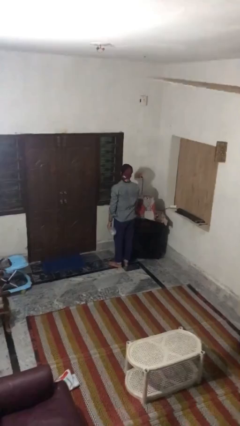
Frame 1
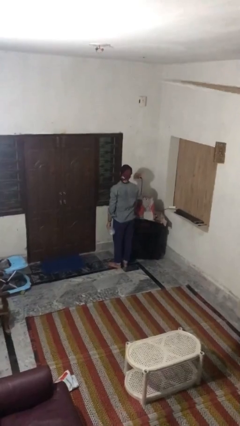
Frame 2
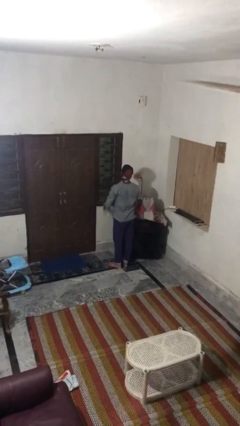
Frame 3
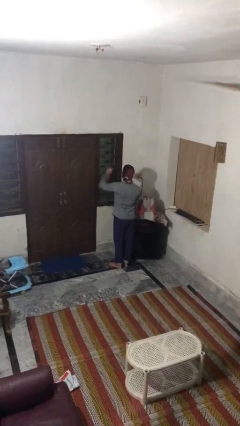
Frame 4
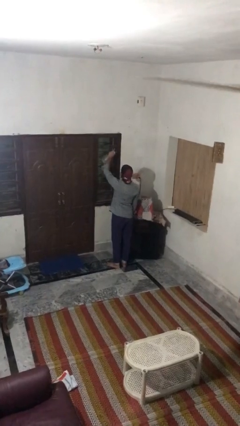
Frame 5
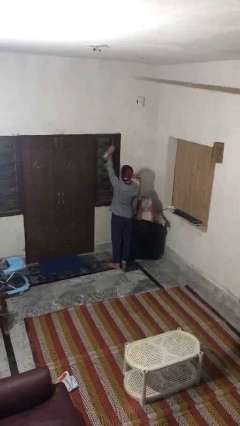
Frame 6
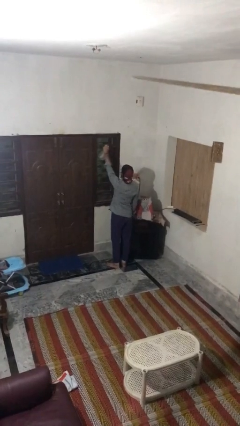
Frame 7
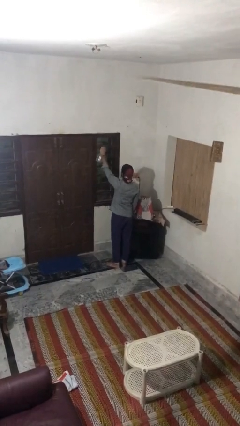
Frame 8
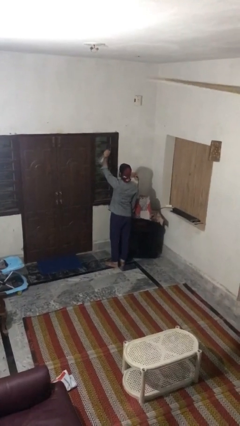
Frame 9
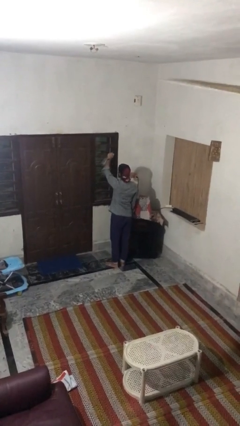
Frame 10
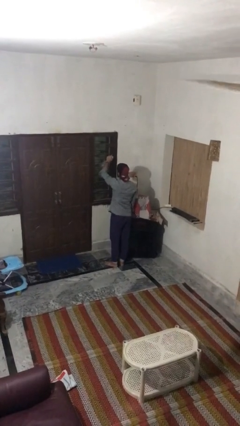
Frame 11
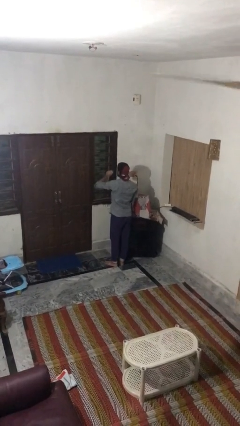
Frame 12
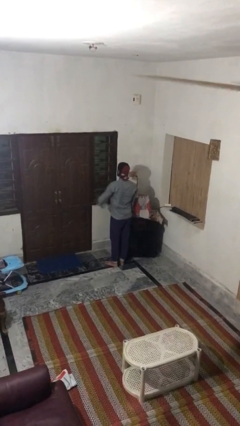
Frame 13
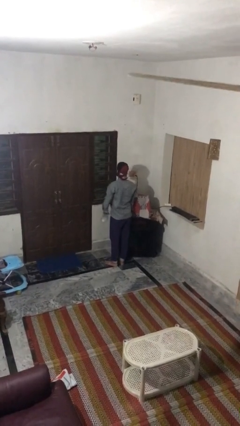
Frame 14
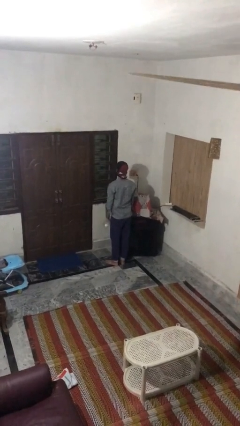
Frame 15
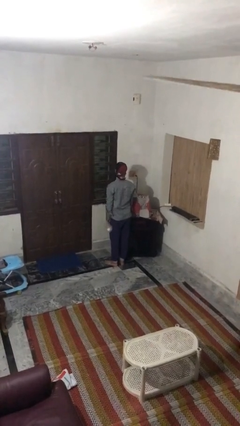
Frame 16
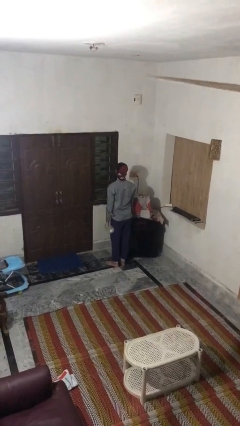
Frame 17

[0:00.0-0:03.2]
person sprays from bottle

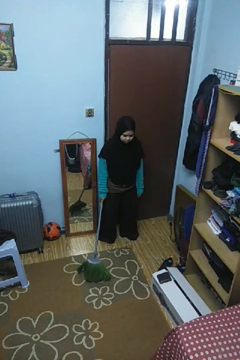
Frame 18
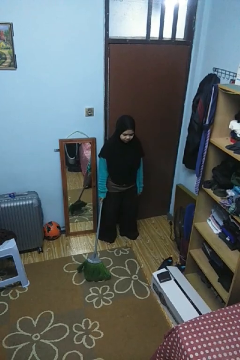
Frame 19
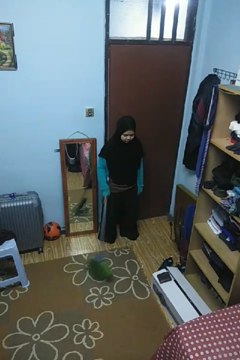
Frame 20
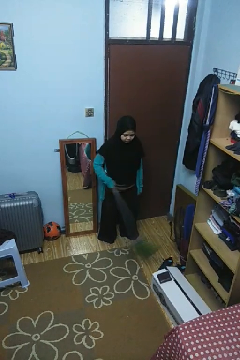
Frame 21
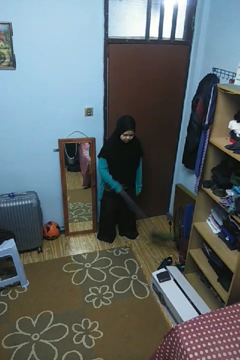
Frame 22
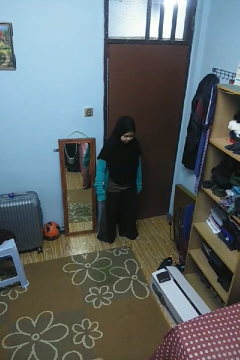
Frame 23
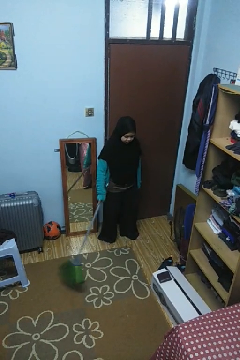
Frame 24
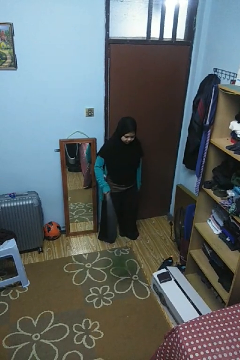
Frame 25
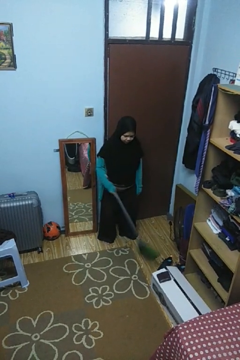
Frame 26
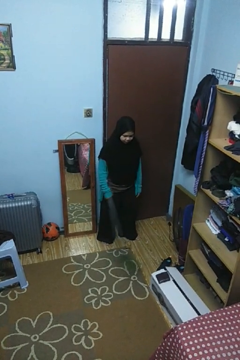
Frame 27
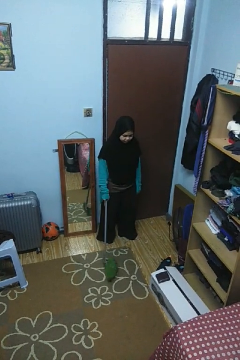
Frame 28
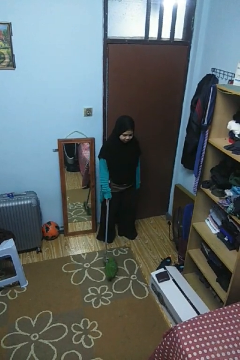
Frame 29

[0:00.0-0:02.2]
person sweeps floor

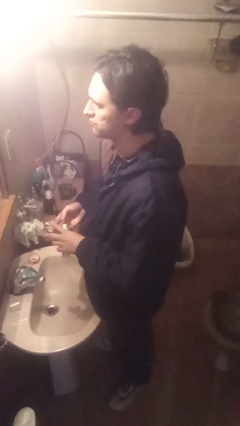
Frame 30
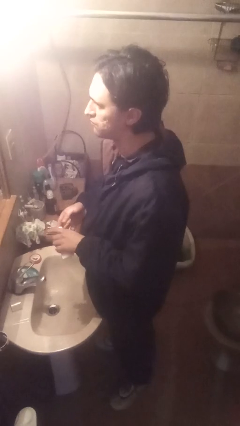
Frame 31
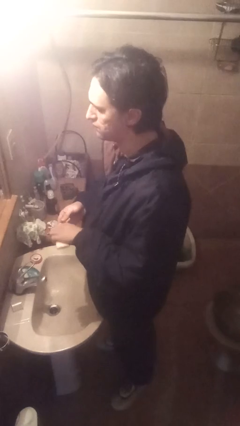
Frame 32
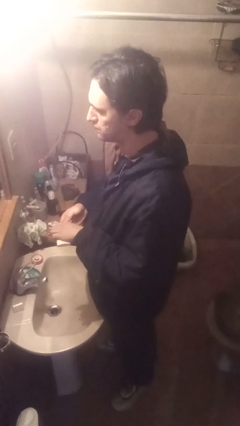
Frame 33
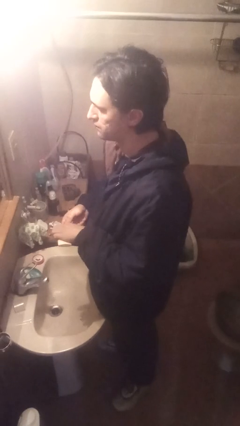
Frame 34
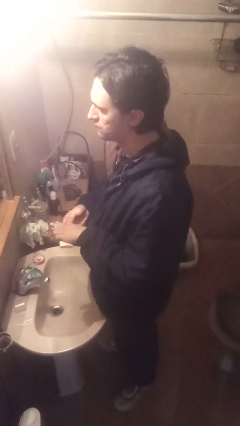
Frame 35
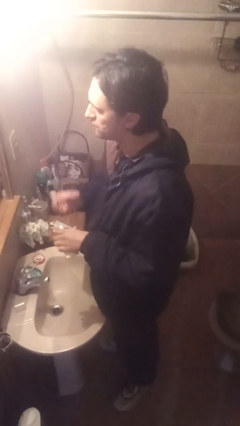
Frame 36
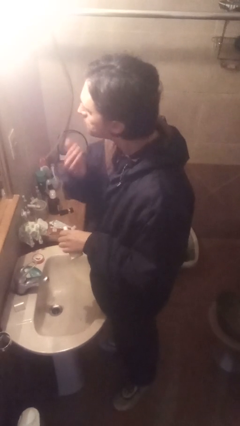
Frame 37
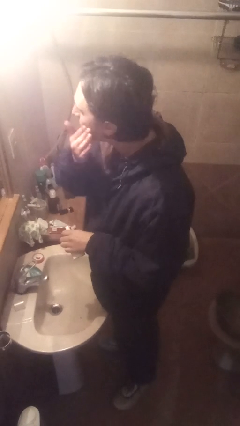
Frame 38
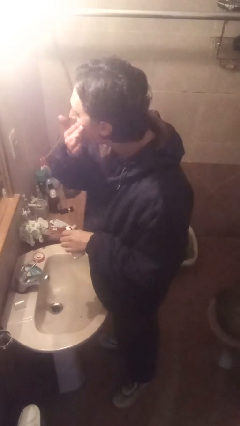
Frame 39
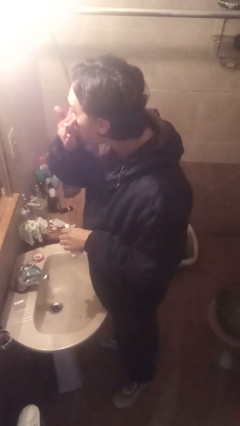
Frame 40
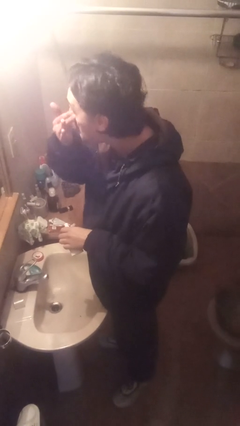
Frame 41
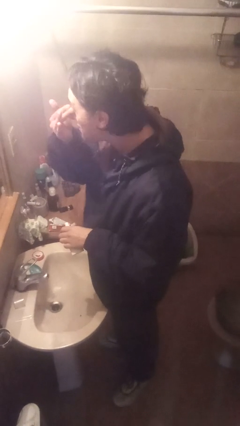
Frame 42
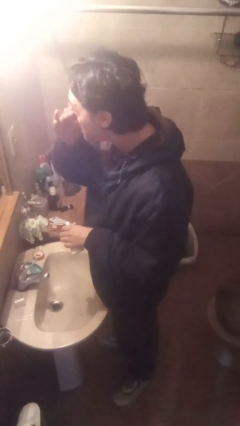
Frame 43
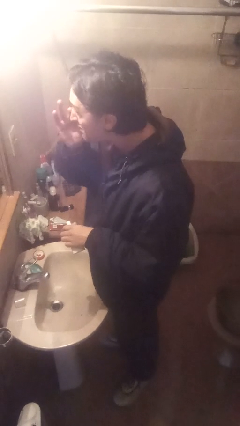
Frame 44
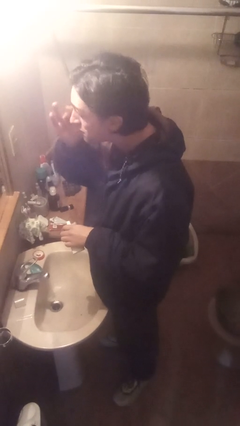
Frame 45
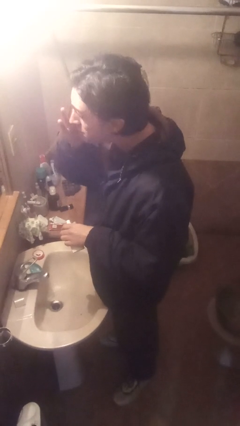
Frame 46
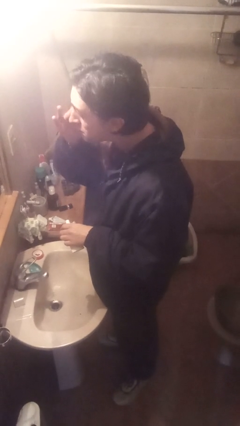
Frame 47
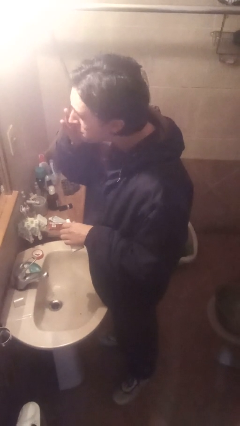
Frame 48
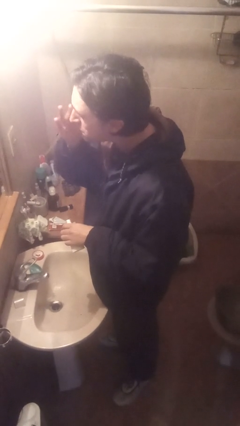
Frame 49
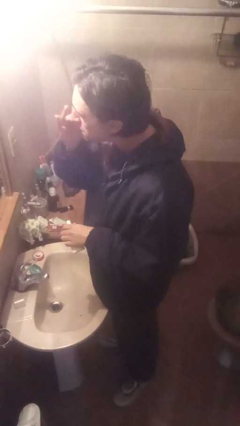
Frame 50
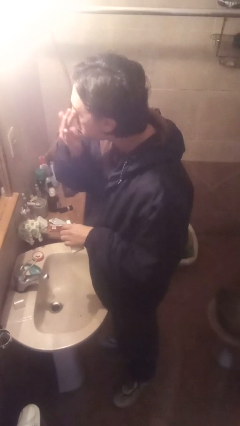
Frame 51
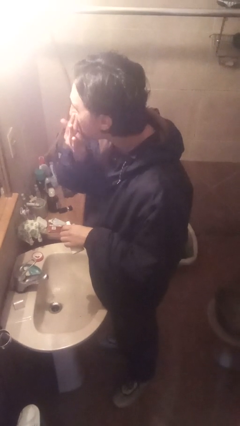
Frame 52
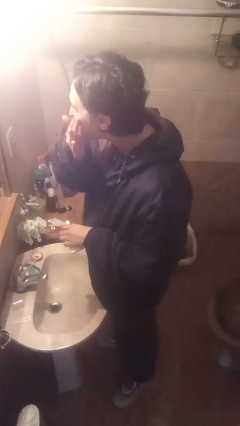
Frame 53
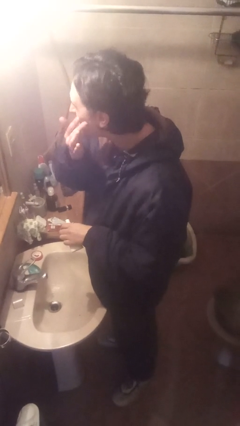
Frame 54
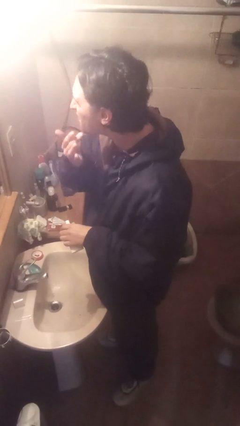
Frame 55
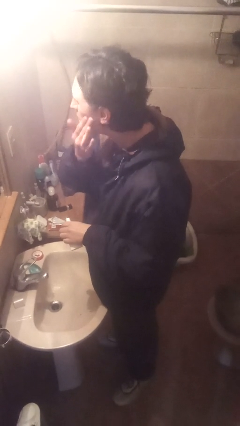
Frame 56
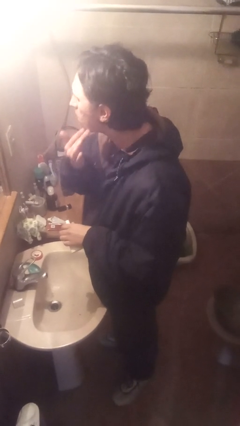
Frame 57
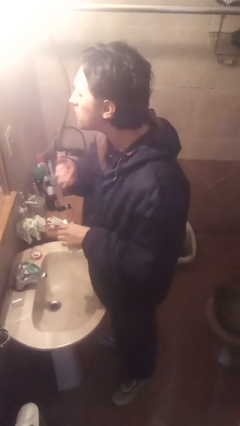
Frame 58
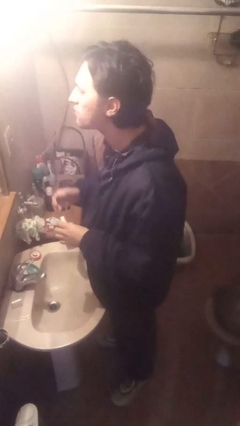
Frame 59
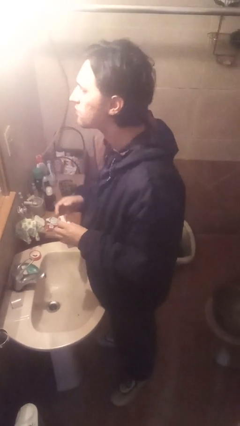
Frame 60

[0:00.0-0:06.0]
person applies foundation makeup

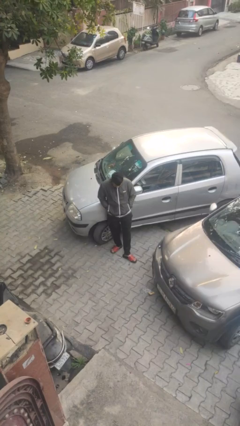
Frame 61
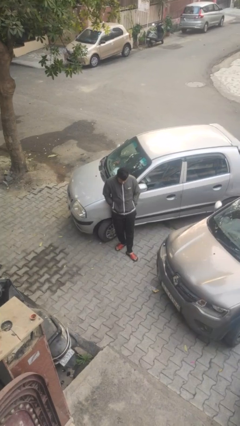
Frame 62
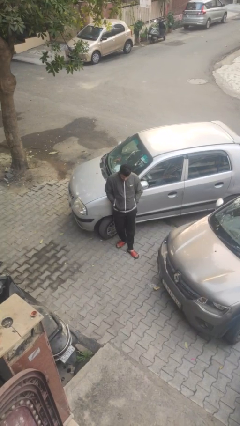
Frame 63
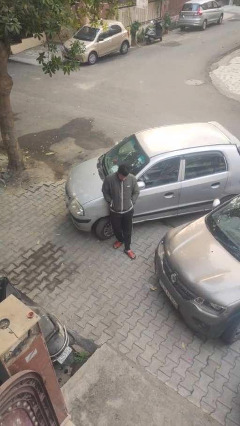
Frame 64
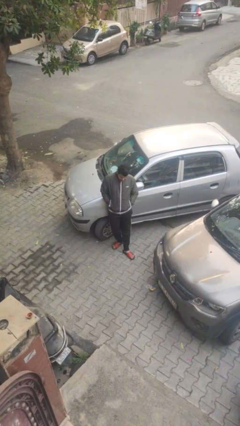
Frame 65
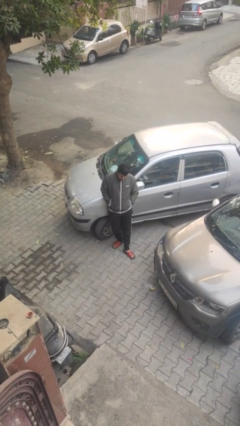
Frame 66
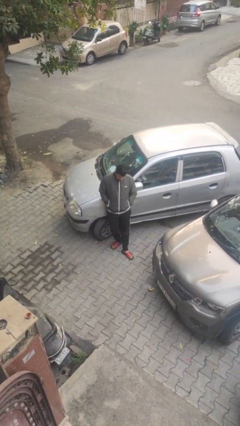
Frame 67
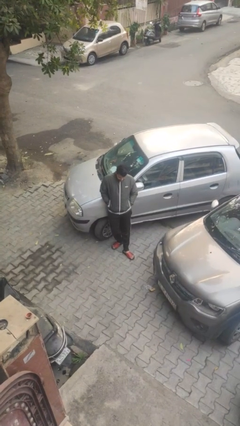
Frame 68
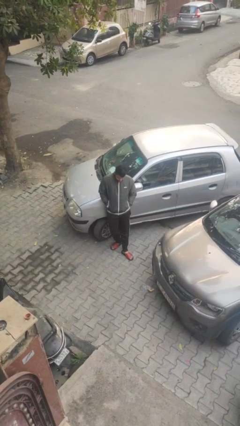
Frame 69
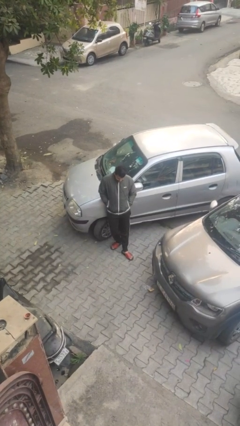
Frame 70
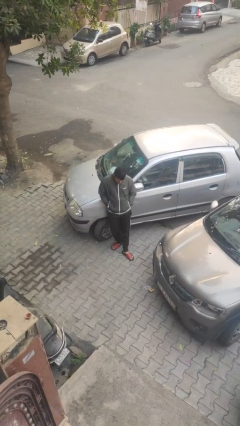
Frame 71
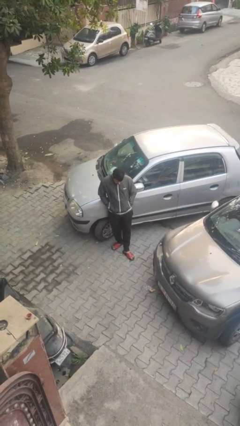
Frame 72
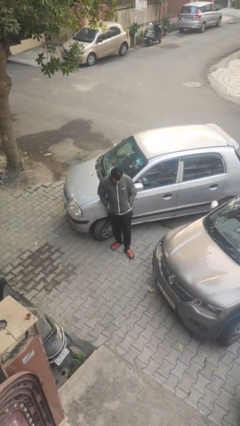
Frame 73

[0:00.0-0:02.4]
person leans against car

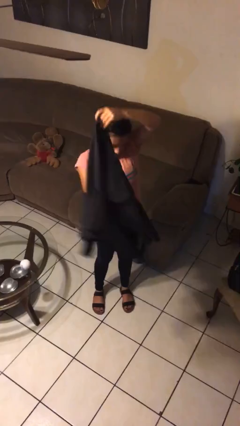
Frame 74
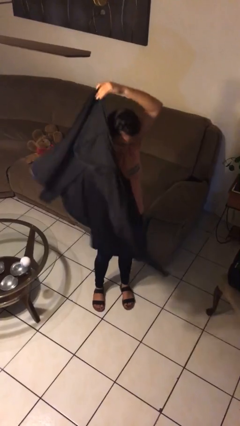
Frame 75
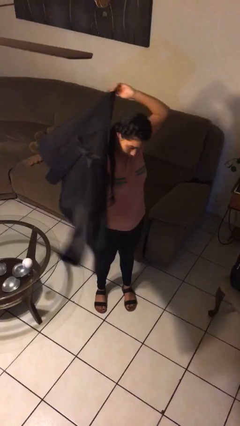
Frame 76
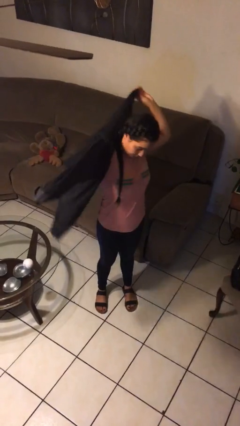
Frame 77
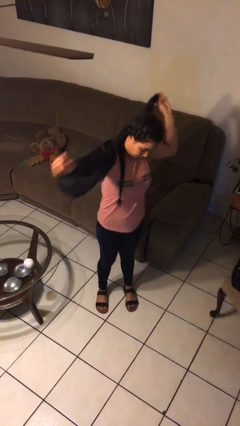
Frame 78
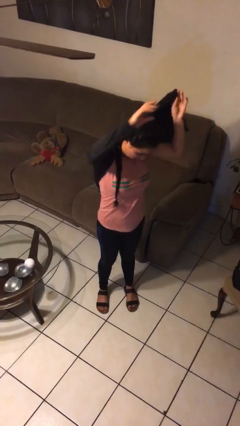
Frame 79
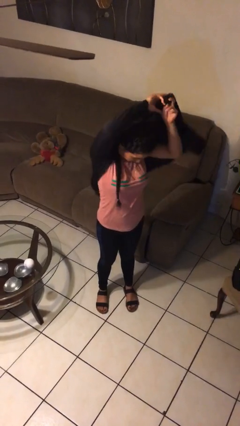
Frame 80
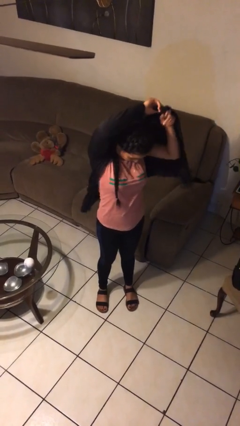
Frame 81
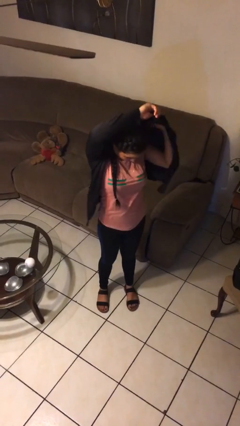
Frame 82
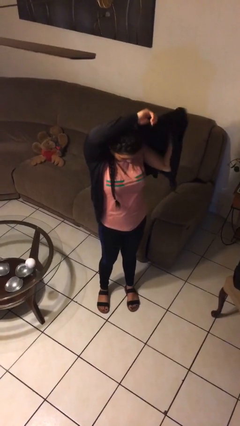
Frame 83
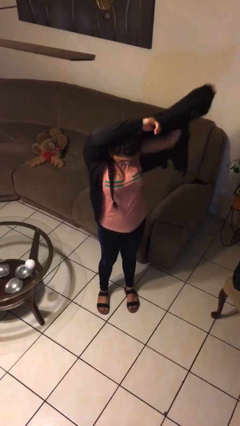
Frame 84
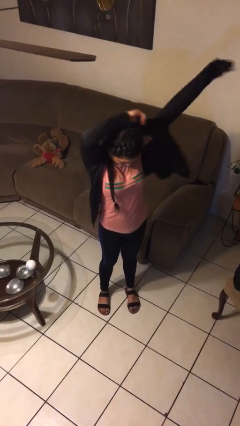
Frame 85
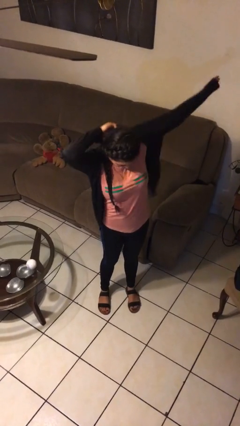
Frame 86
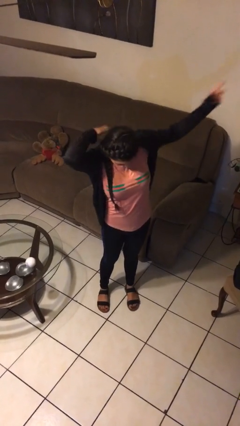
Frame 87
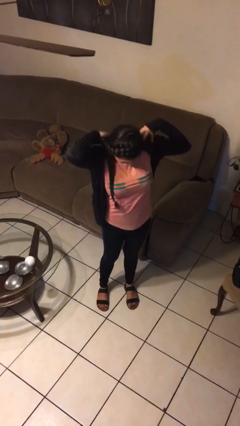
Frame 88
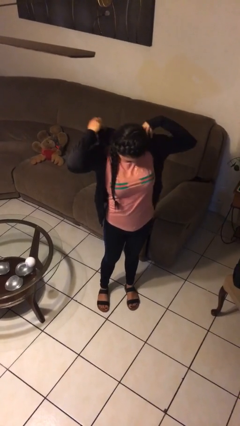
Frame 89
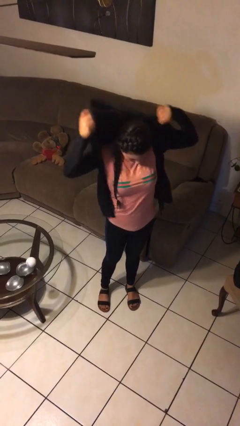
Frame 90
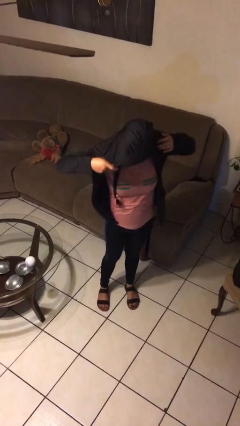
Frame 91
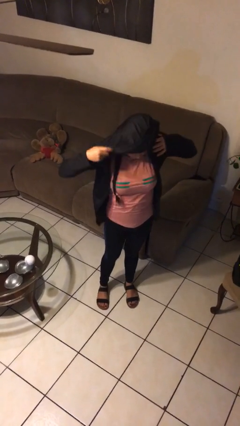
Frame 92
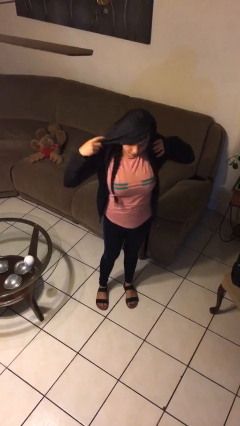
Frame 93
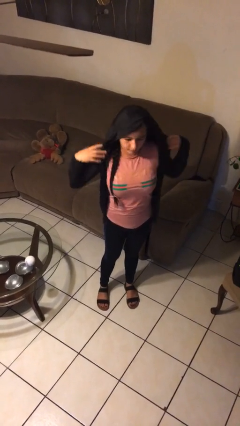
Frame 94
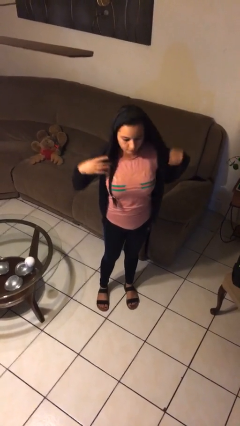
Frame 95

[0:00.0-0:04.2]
person puts on hoodie

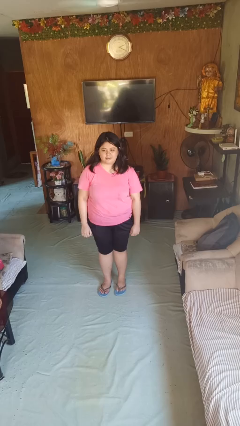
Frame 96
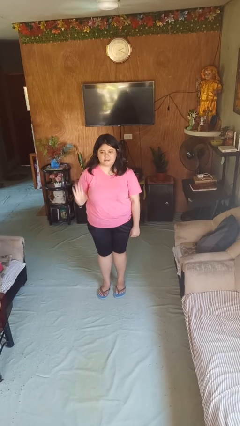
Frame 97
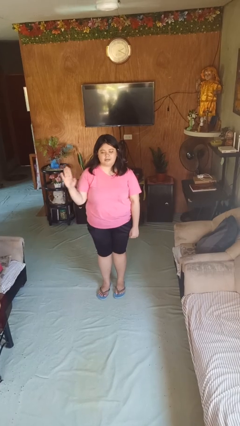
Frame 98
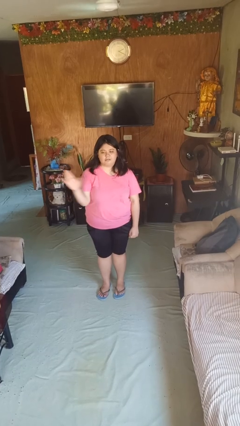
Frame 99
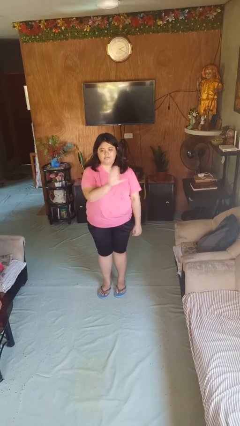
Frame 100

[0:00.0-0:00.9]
person gestures swipe left
